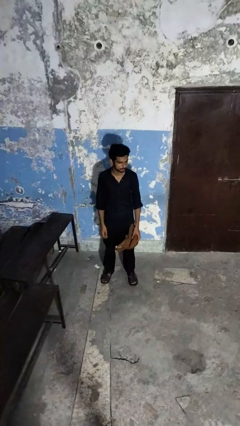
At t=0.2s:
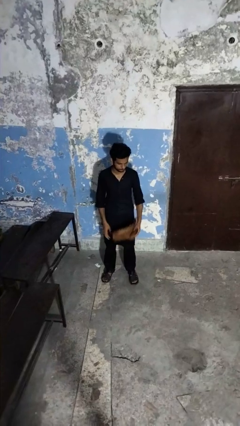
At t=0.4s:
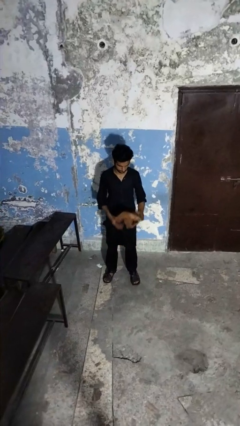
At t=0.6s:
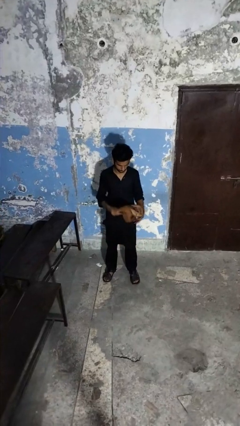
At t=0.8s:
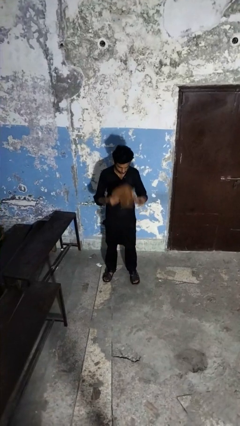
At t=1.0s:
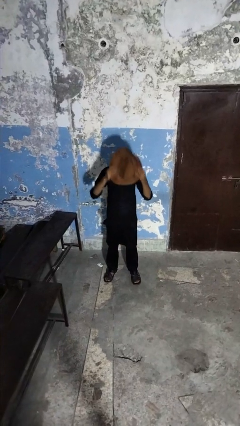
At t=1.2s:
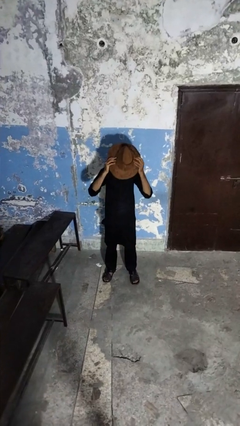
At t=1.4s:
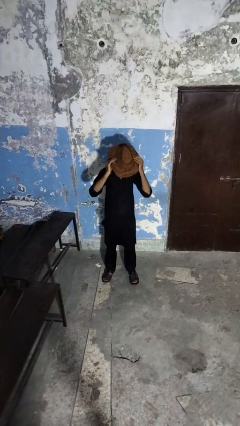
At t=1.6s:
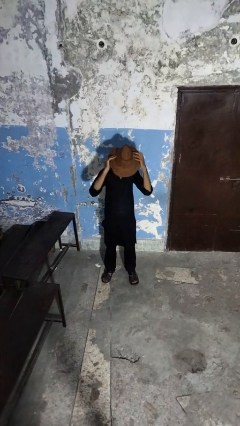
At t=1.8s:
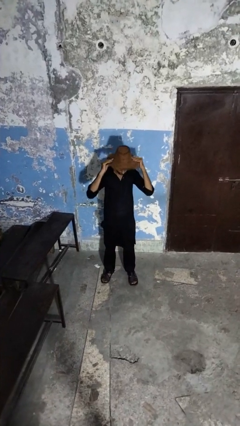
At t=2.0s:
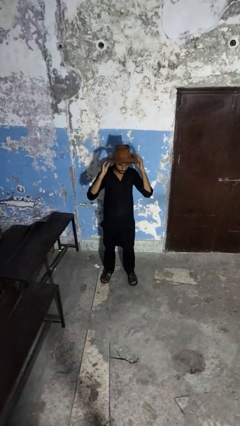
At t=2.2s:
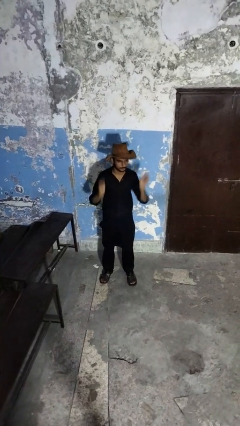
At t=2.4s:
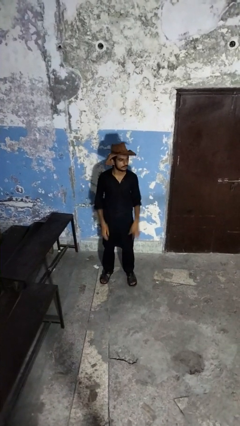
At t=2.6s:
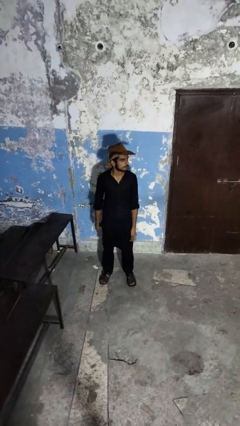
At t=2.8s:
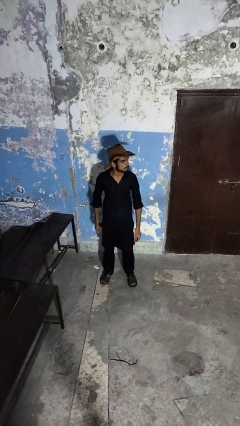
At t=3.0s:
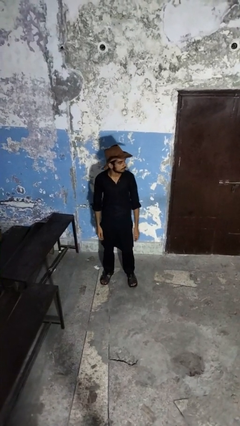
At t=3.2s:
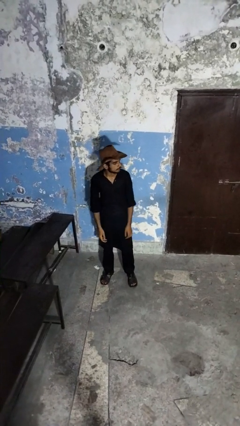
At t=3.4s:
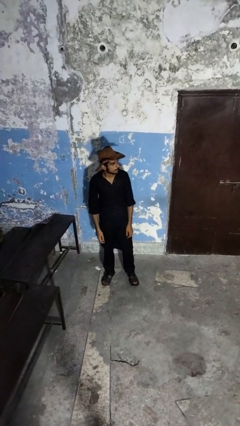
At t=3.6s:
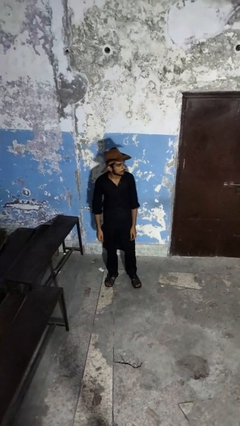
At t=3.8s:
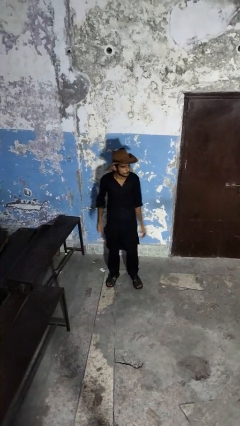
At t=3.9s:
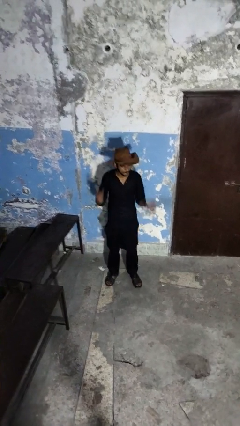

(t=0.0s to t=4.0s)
person puts on hat

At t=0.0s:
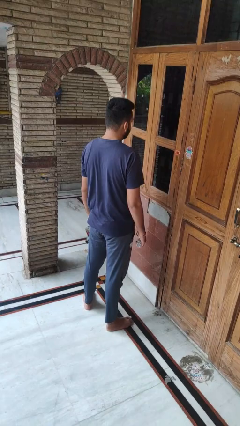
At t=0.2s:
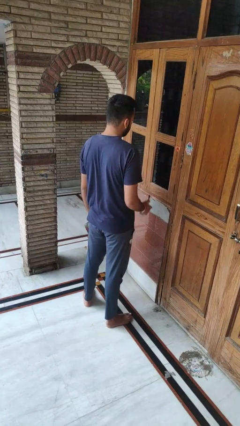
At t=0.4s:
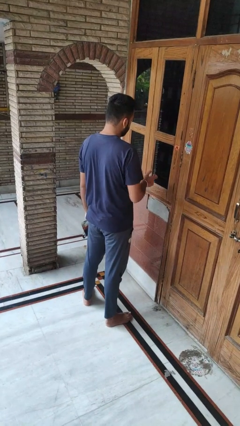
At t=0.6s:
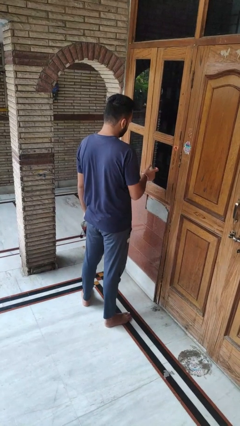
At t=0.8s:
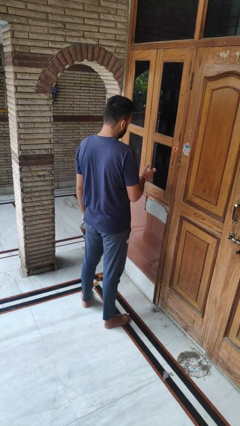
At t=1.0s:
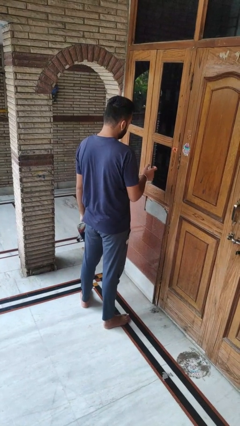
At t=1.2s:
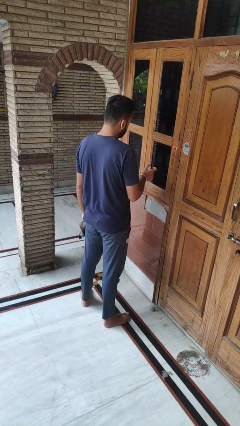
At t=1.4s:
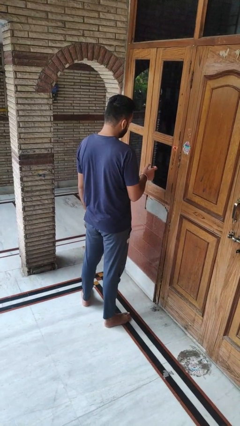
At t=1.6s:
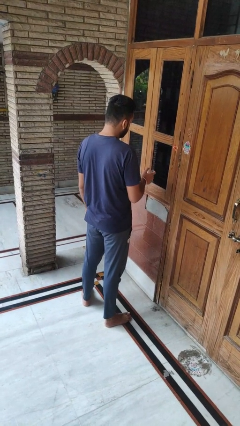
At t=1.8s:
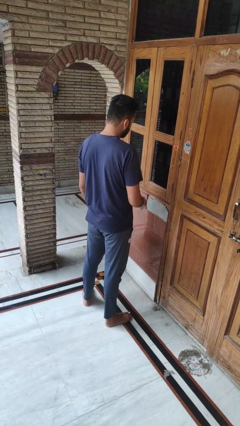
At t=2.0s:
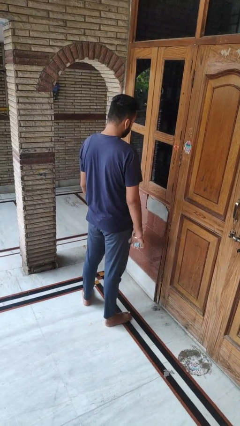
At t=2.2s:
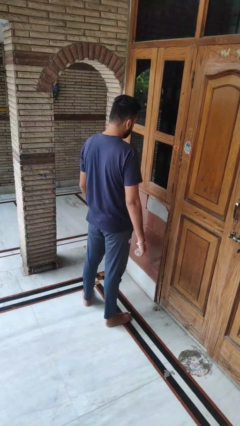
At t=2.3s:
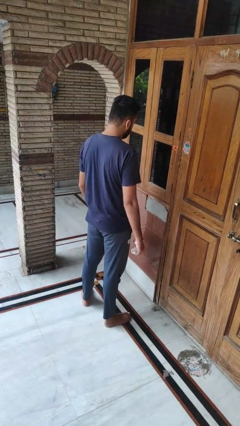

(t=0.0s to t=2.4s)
person sprays from bottle

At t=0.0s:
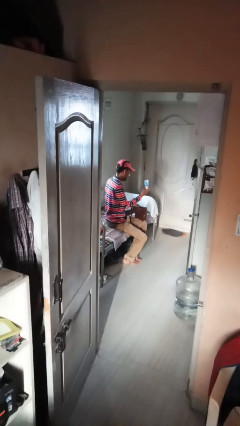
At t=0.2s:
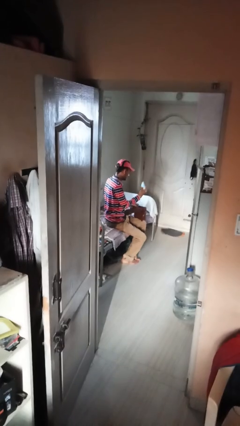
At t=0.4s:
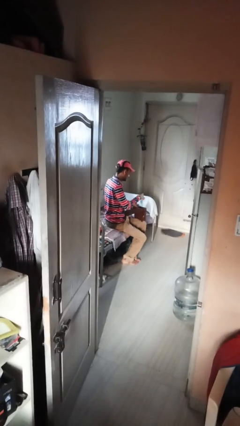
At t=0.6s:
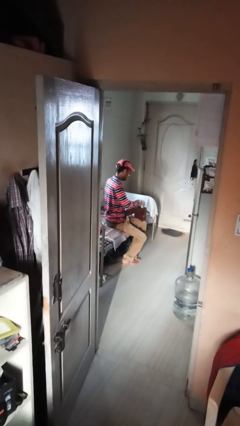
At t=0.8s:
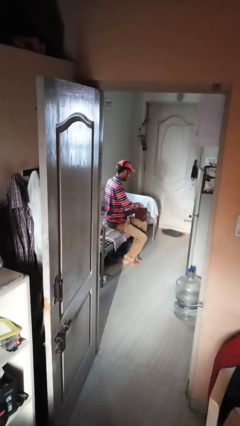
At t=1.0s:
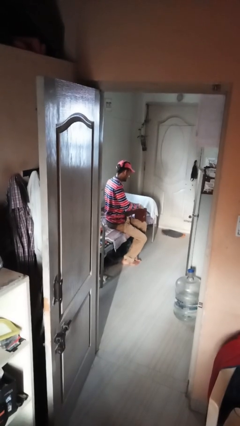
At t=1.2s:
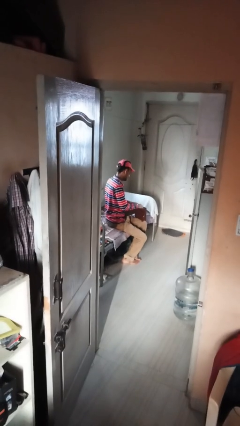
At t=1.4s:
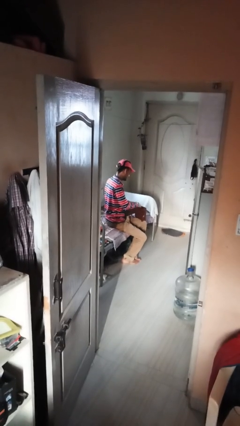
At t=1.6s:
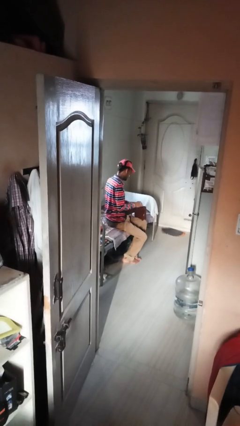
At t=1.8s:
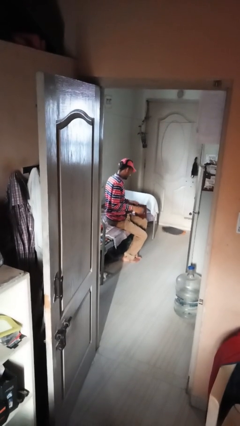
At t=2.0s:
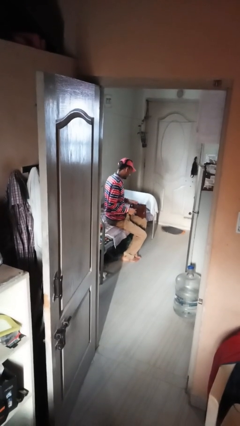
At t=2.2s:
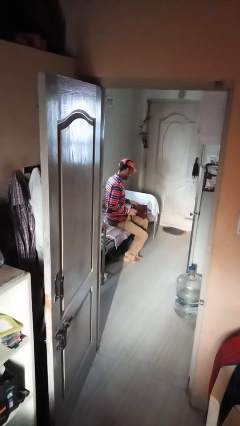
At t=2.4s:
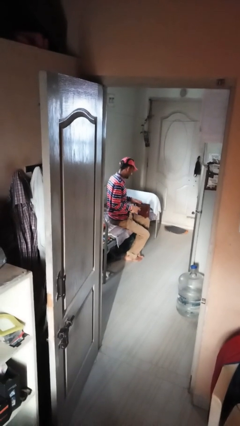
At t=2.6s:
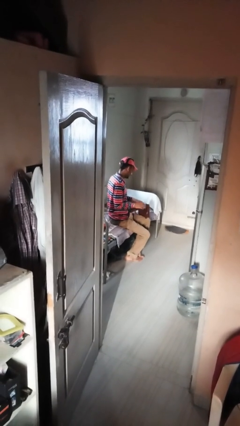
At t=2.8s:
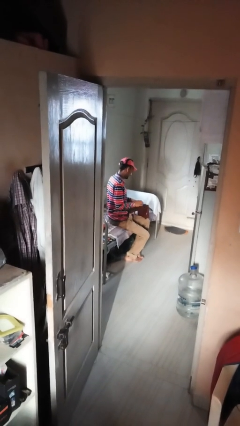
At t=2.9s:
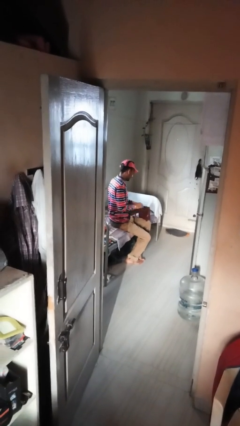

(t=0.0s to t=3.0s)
person puts object into purse

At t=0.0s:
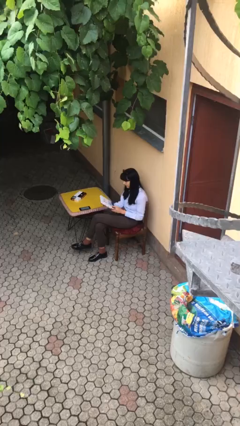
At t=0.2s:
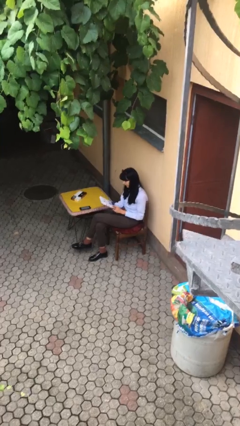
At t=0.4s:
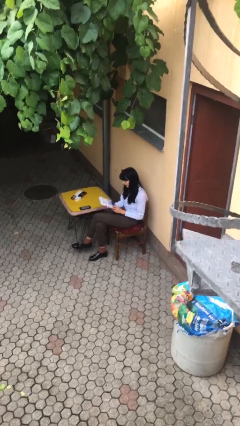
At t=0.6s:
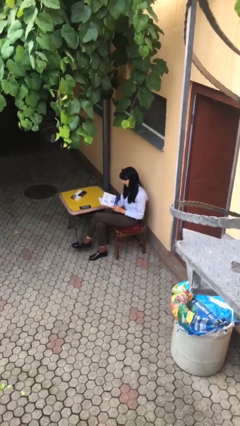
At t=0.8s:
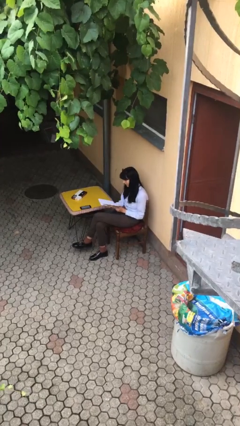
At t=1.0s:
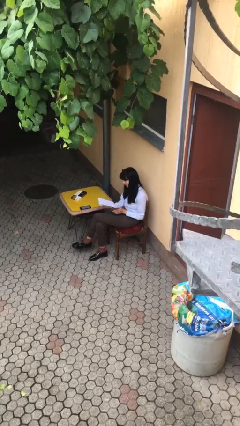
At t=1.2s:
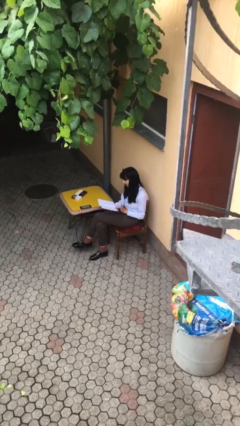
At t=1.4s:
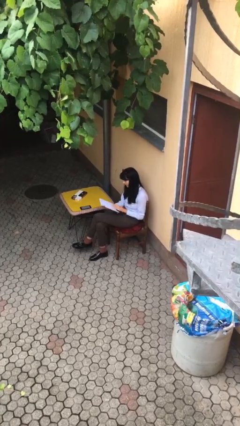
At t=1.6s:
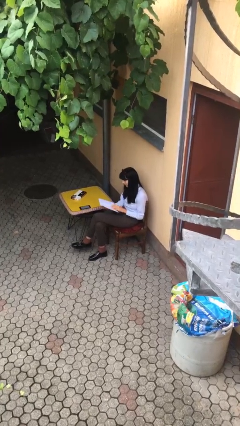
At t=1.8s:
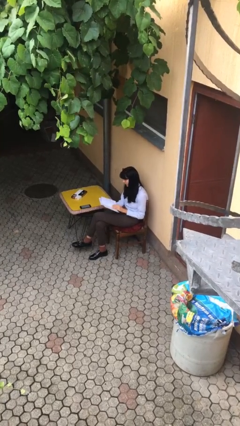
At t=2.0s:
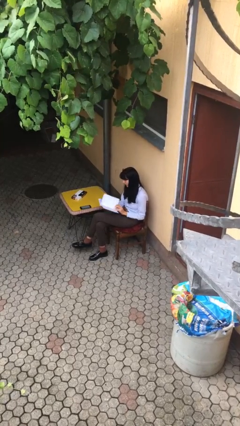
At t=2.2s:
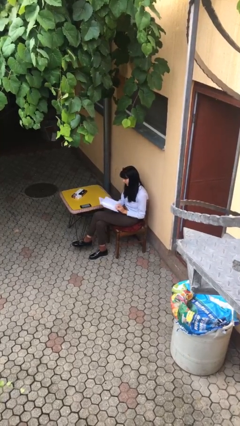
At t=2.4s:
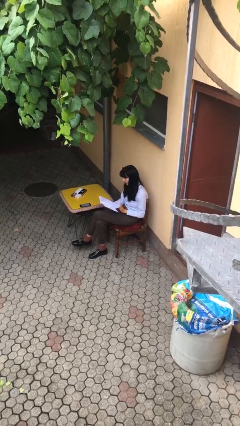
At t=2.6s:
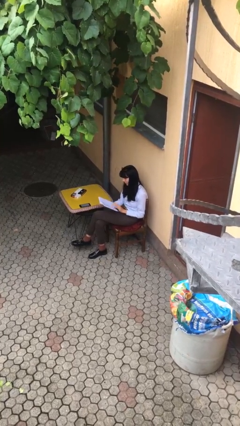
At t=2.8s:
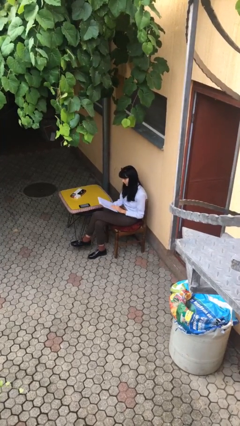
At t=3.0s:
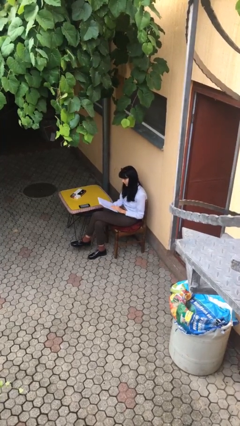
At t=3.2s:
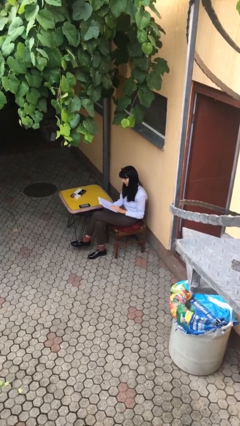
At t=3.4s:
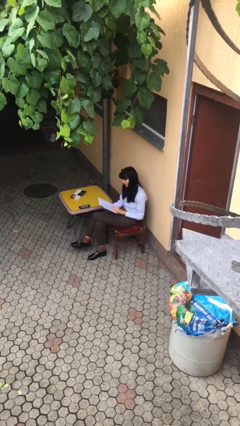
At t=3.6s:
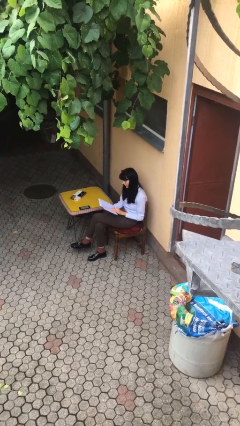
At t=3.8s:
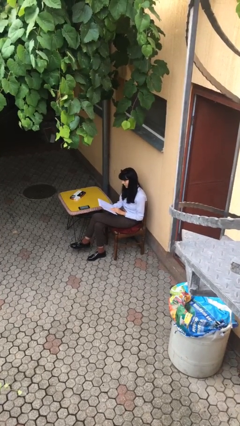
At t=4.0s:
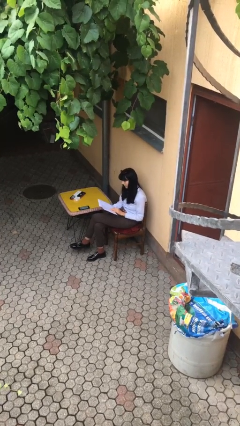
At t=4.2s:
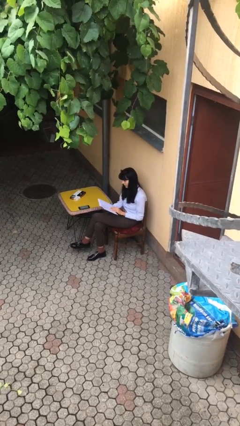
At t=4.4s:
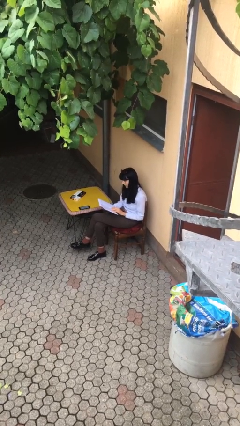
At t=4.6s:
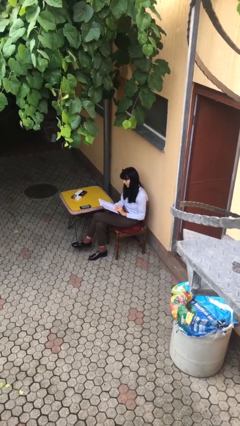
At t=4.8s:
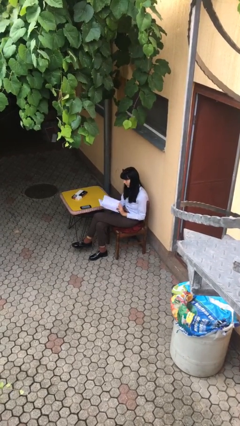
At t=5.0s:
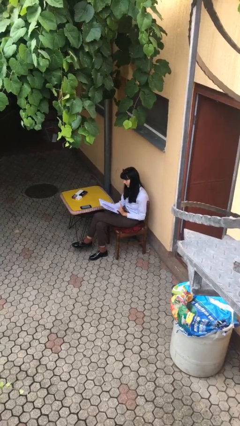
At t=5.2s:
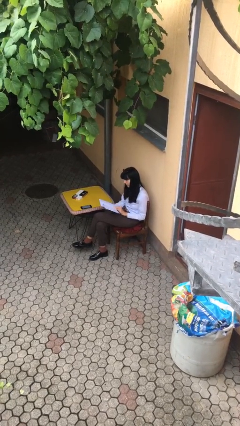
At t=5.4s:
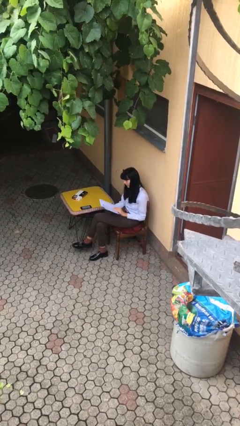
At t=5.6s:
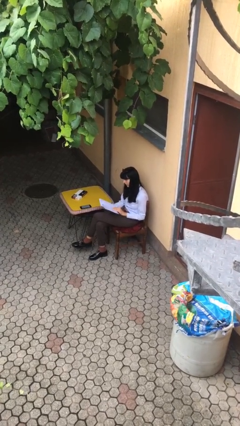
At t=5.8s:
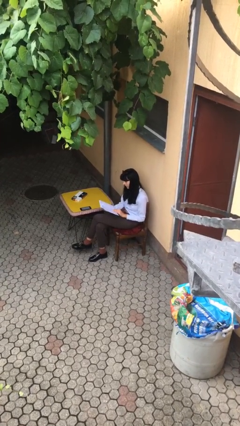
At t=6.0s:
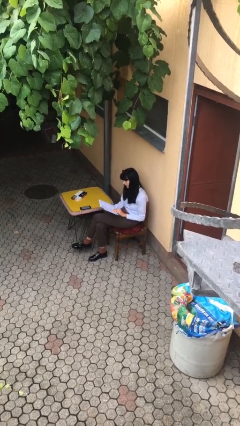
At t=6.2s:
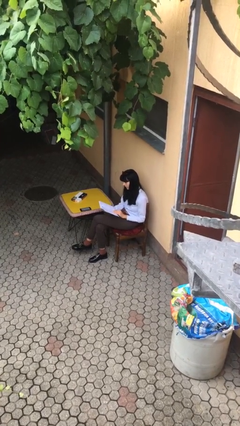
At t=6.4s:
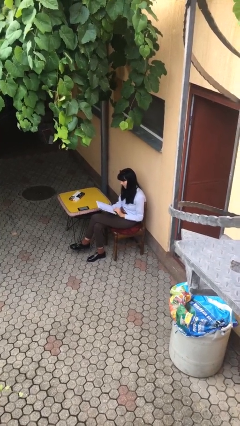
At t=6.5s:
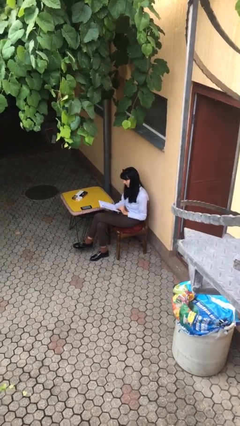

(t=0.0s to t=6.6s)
person reads document

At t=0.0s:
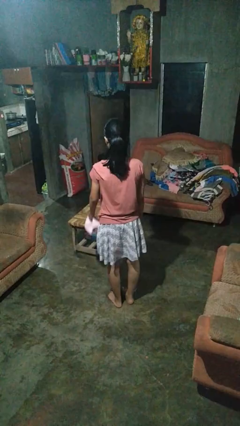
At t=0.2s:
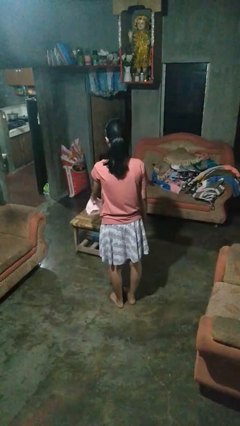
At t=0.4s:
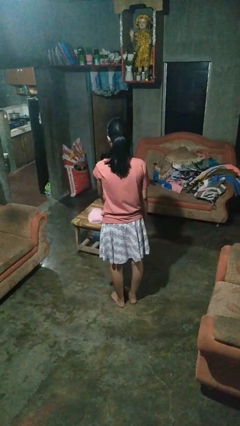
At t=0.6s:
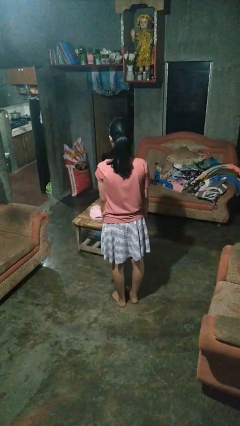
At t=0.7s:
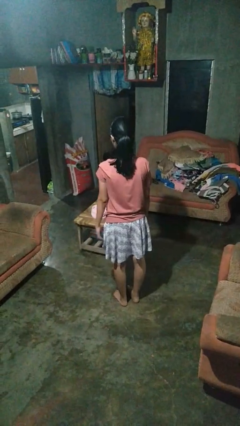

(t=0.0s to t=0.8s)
person throws object on table

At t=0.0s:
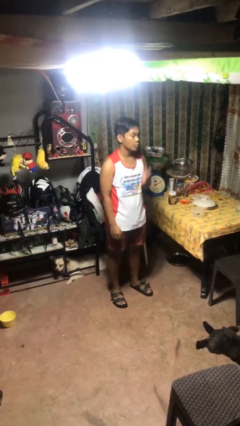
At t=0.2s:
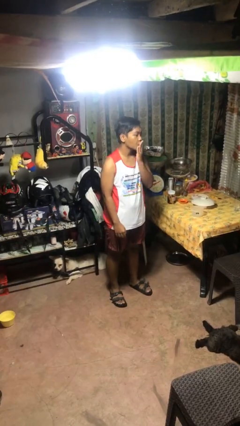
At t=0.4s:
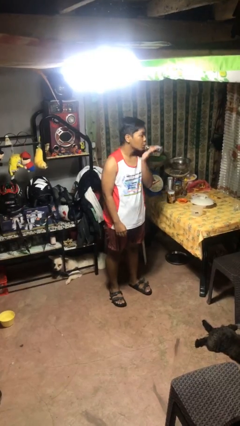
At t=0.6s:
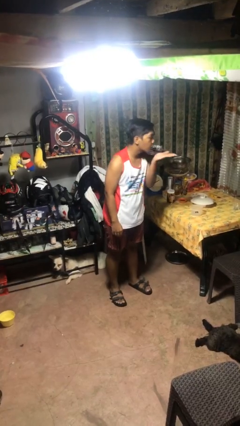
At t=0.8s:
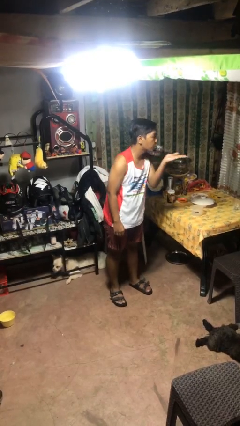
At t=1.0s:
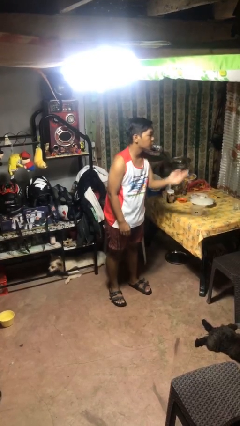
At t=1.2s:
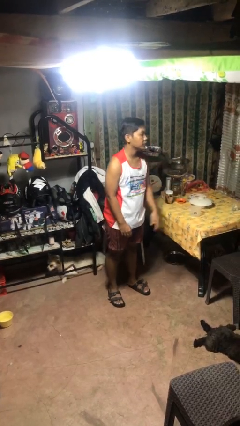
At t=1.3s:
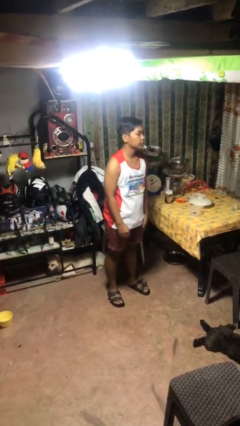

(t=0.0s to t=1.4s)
person gestures blow kiss
